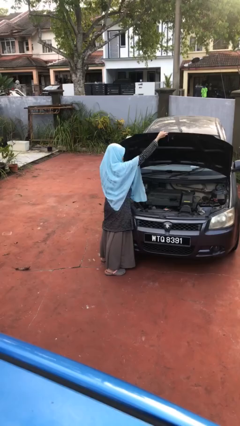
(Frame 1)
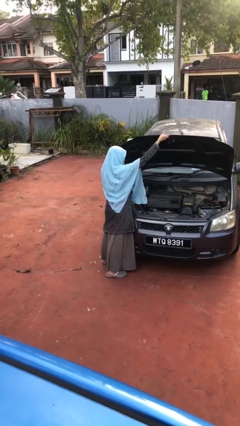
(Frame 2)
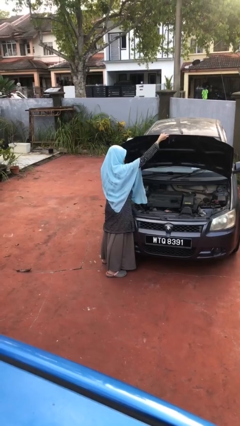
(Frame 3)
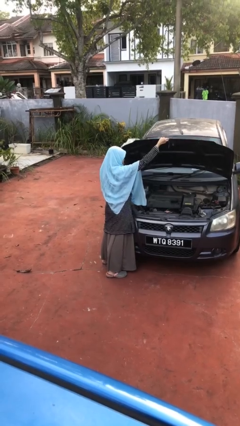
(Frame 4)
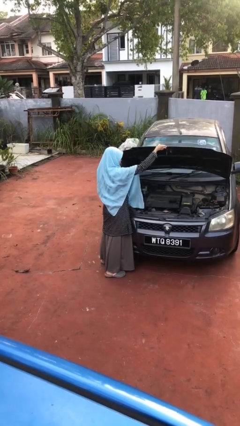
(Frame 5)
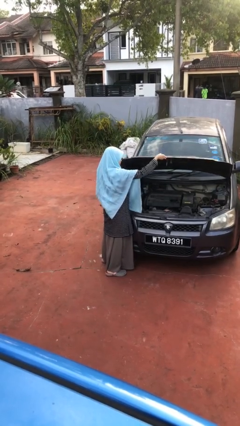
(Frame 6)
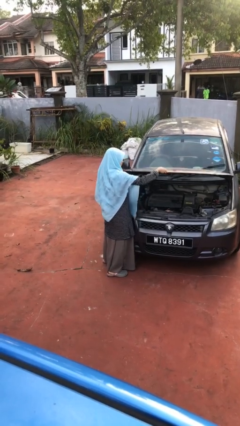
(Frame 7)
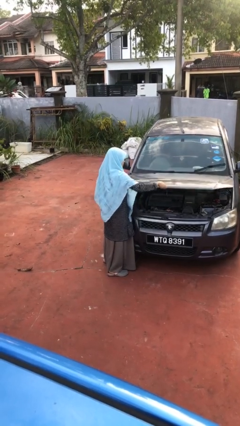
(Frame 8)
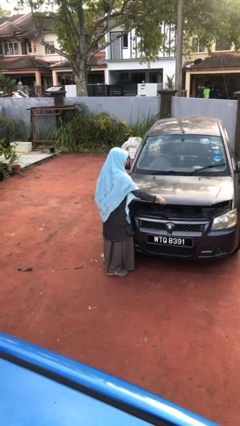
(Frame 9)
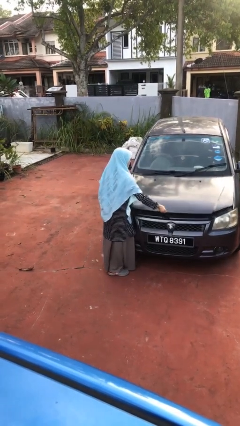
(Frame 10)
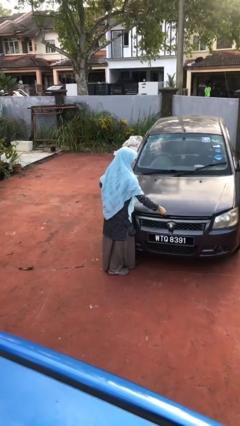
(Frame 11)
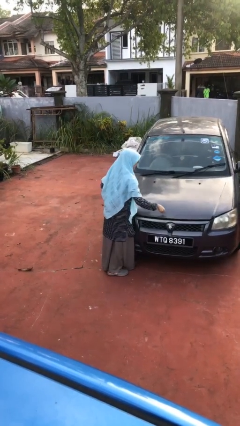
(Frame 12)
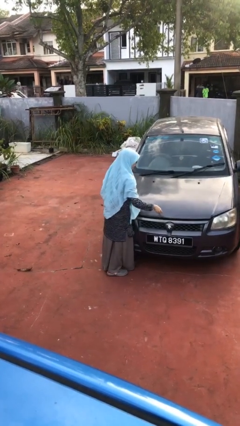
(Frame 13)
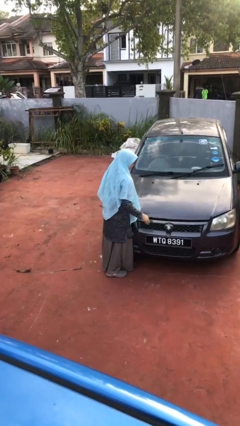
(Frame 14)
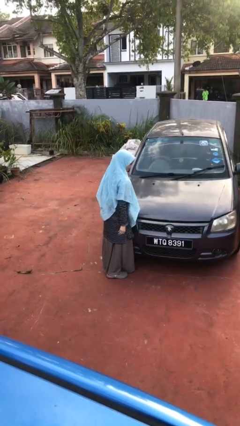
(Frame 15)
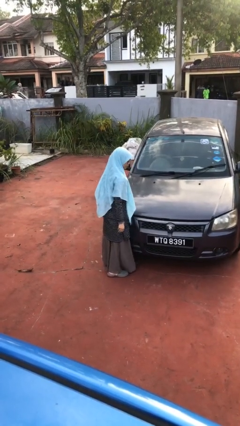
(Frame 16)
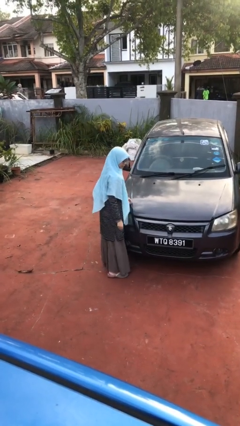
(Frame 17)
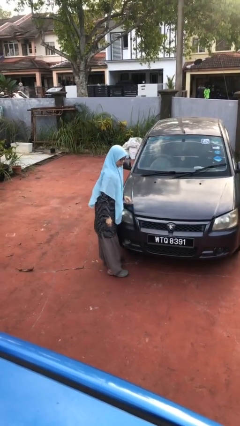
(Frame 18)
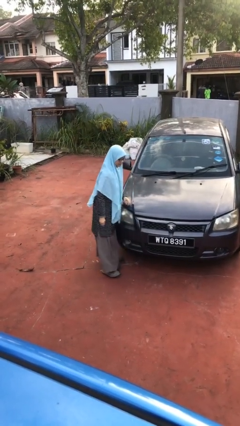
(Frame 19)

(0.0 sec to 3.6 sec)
person closes car hood

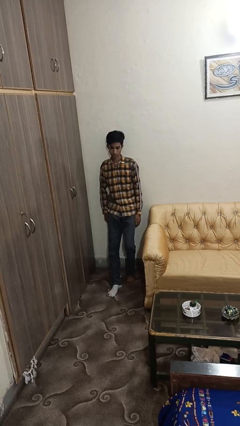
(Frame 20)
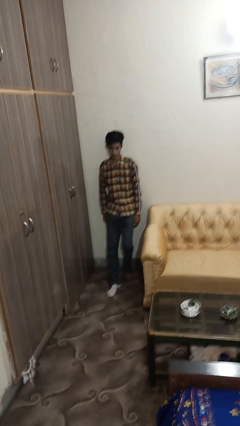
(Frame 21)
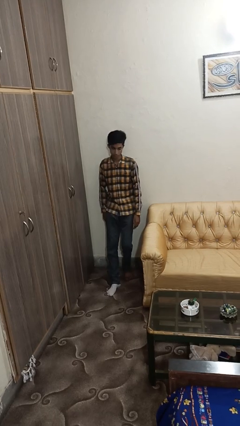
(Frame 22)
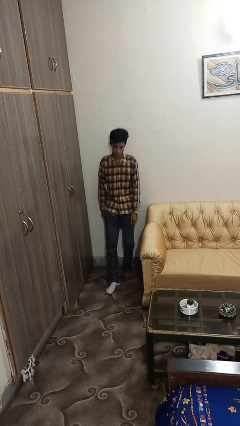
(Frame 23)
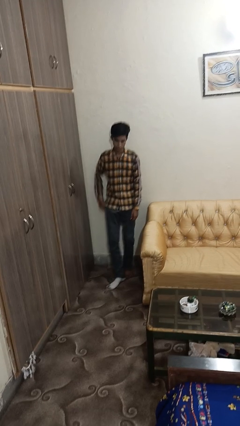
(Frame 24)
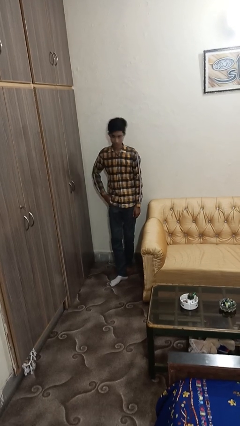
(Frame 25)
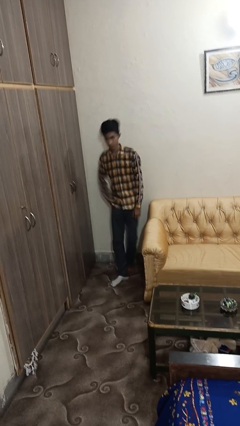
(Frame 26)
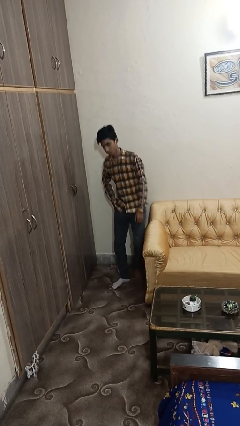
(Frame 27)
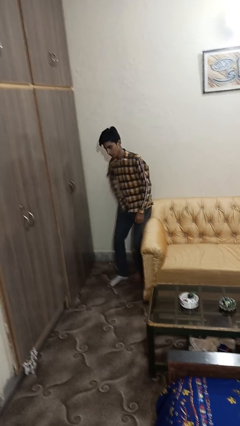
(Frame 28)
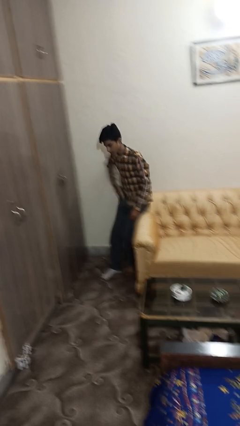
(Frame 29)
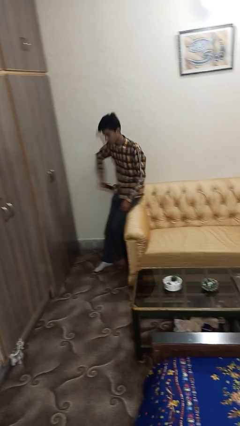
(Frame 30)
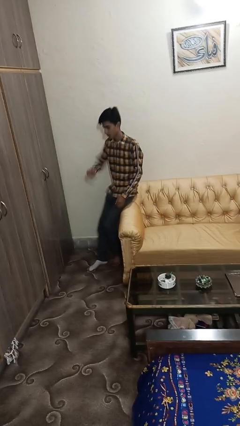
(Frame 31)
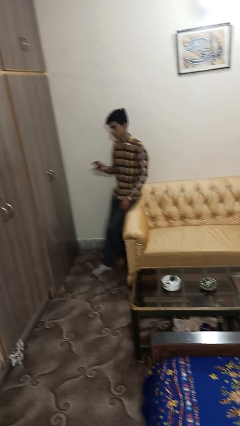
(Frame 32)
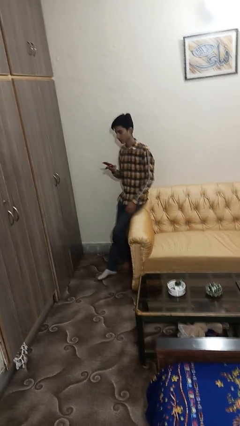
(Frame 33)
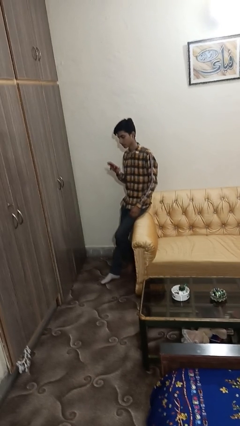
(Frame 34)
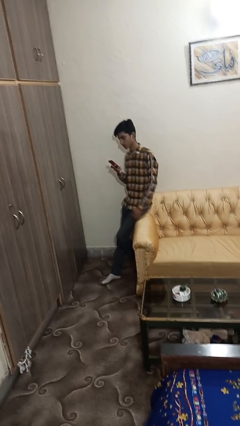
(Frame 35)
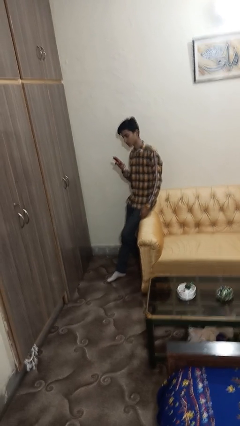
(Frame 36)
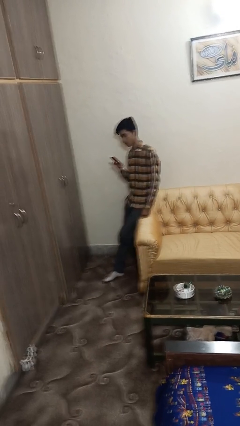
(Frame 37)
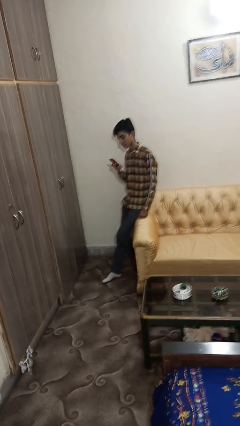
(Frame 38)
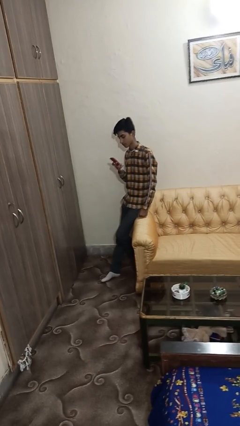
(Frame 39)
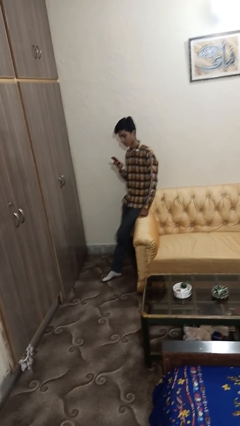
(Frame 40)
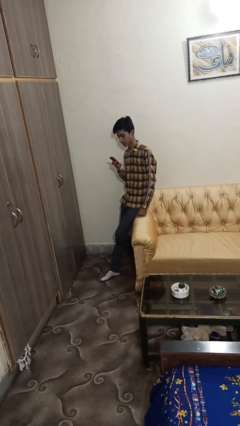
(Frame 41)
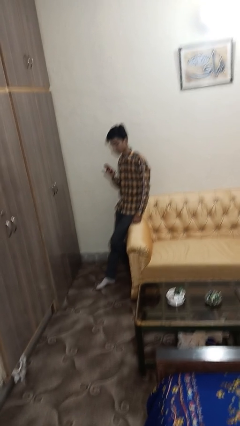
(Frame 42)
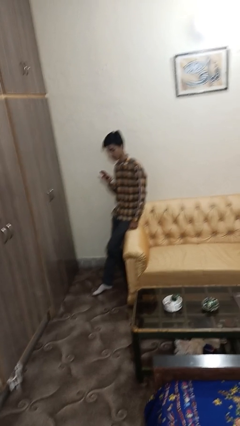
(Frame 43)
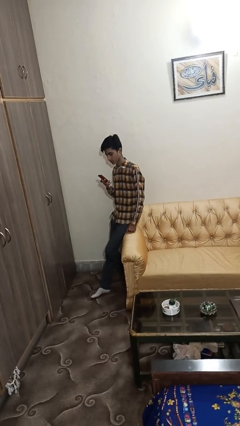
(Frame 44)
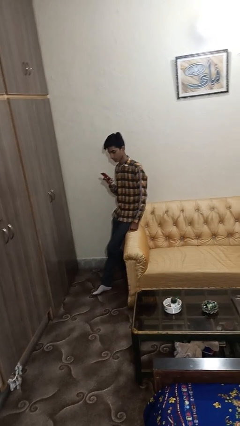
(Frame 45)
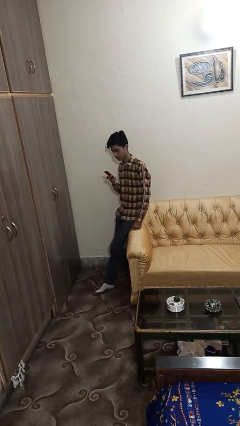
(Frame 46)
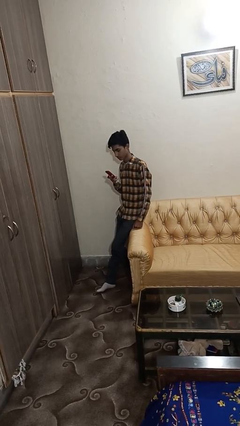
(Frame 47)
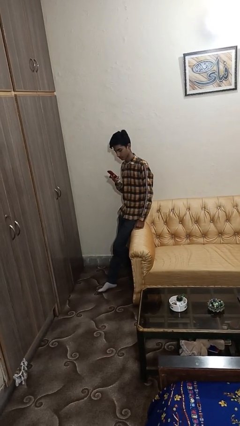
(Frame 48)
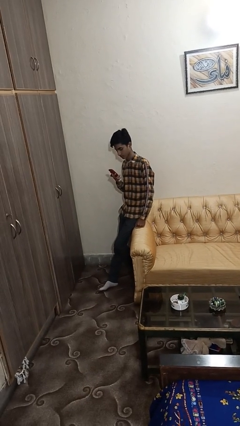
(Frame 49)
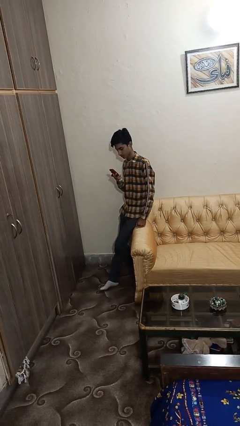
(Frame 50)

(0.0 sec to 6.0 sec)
person takes phone from pocket

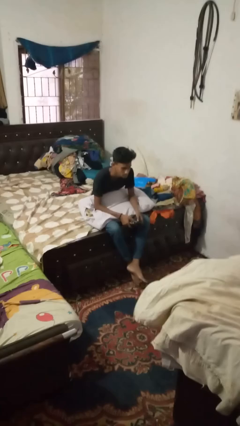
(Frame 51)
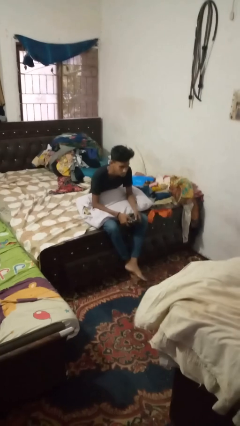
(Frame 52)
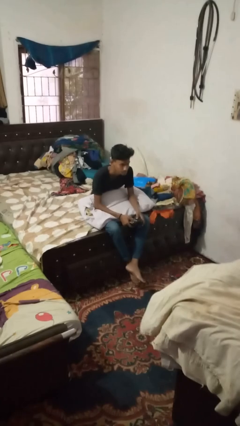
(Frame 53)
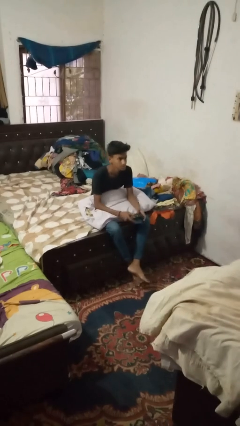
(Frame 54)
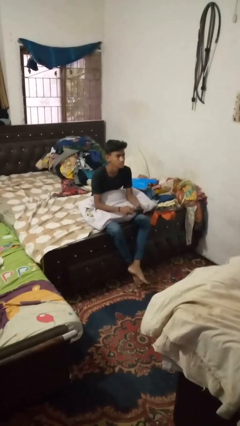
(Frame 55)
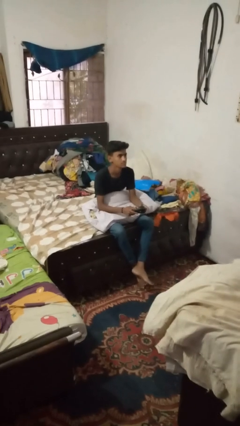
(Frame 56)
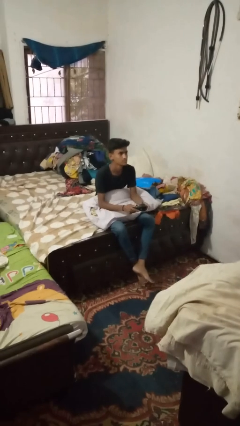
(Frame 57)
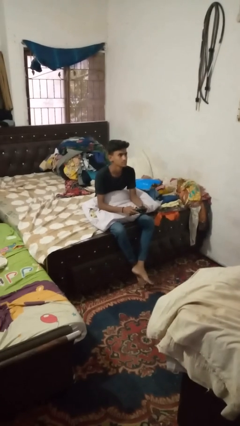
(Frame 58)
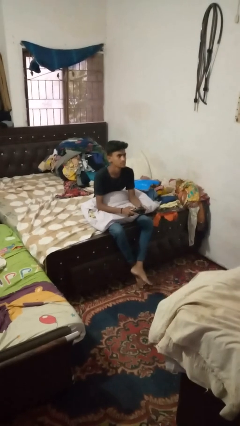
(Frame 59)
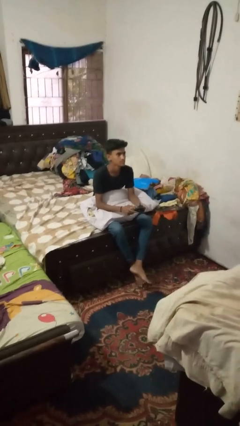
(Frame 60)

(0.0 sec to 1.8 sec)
person interacts with handheld game

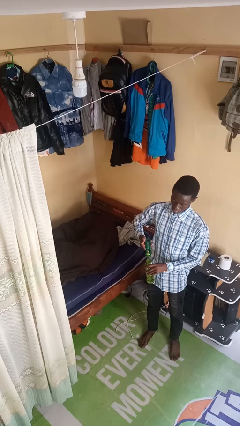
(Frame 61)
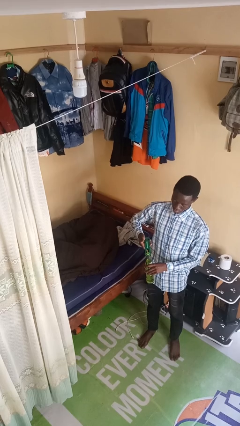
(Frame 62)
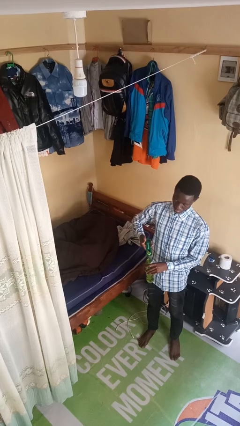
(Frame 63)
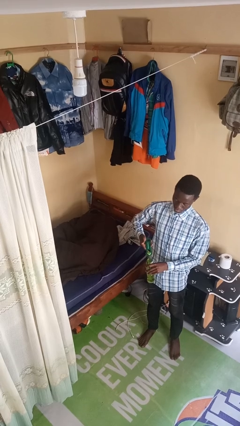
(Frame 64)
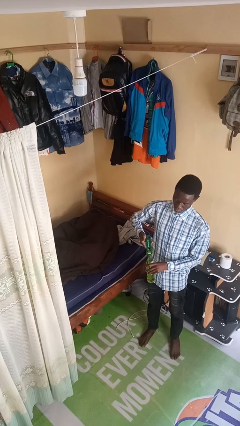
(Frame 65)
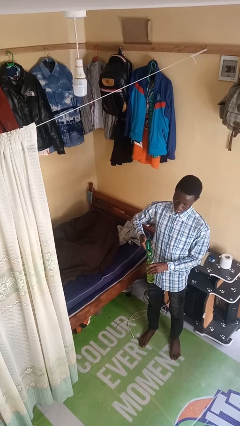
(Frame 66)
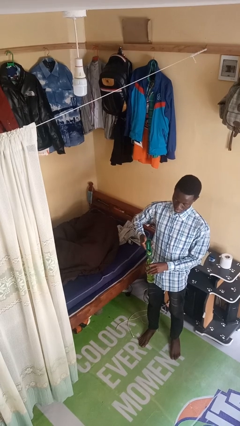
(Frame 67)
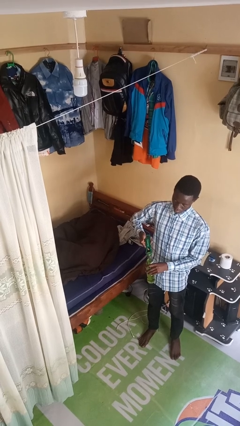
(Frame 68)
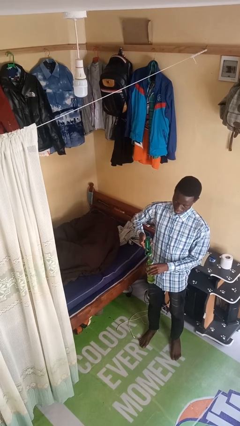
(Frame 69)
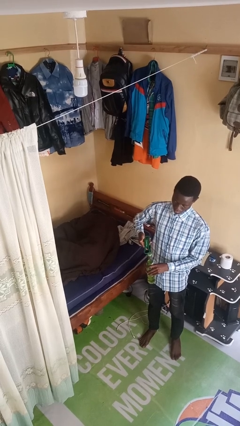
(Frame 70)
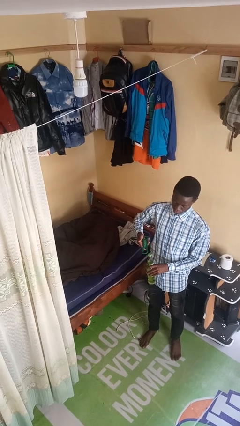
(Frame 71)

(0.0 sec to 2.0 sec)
person opens can with can opener

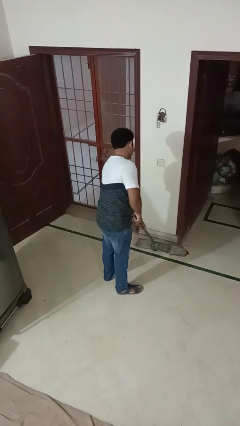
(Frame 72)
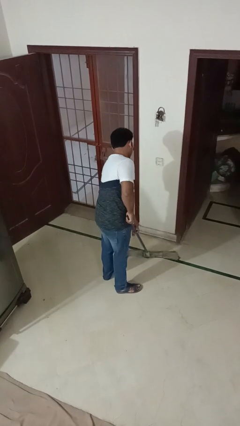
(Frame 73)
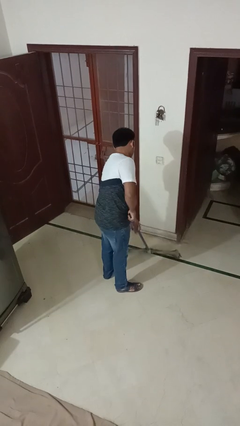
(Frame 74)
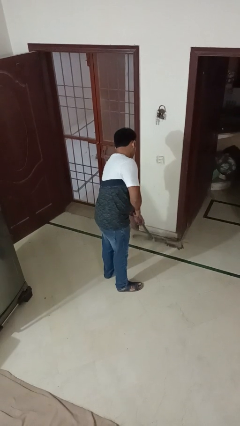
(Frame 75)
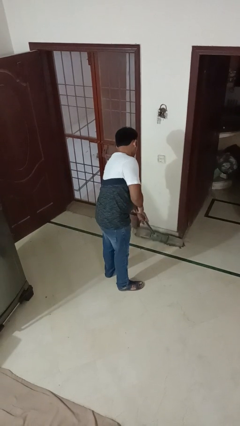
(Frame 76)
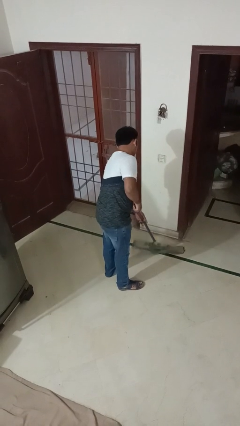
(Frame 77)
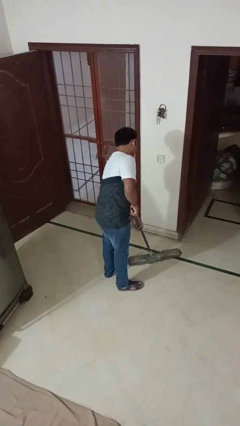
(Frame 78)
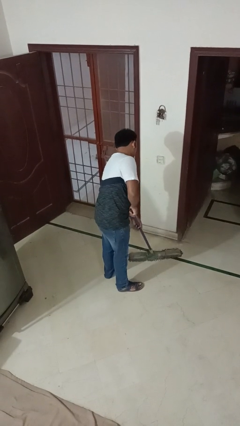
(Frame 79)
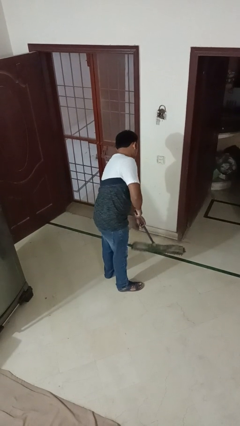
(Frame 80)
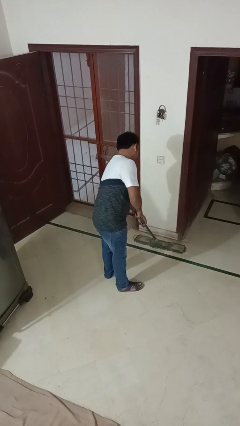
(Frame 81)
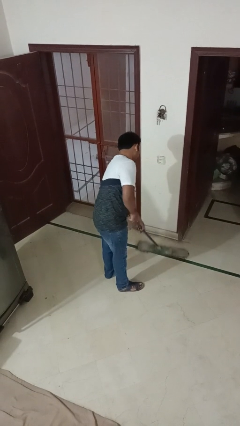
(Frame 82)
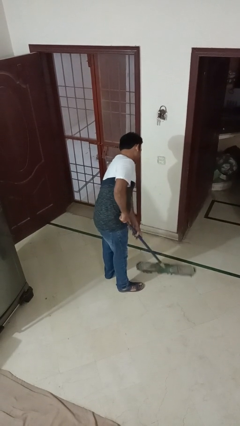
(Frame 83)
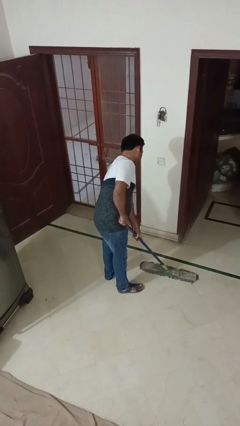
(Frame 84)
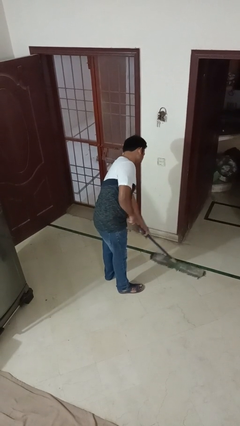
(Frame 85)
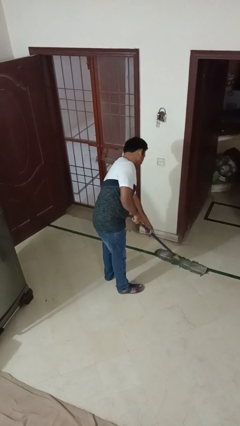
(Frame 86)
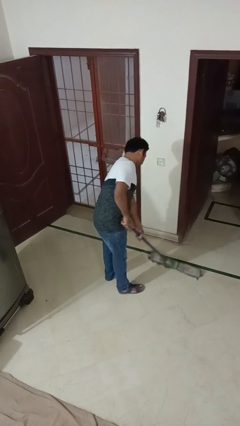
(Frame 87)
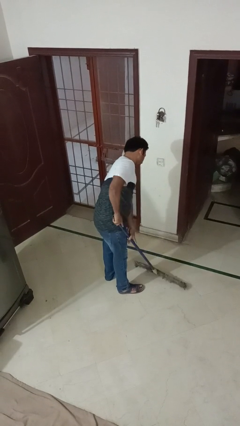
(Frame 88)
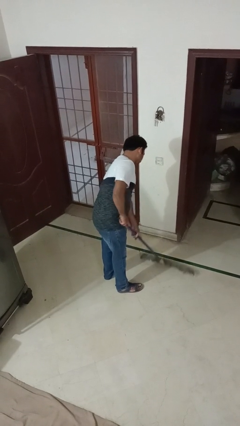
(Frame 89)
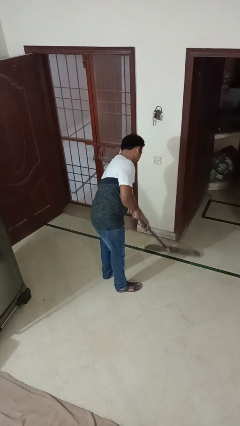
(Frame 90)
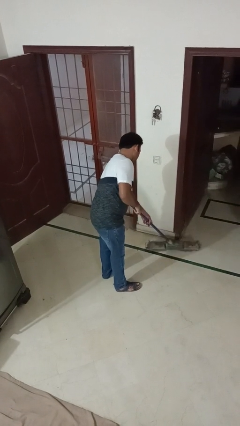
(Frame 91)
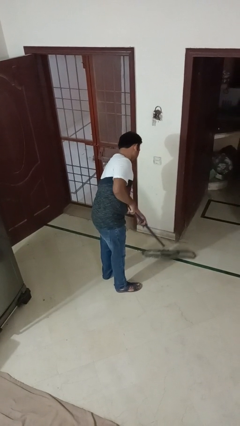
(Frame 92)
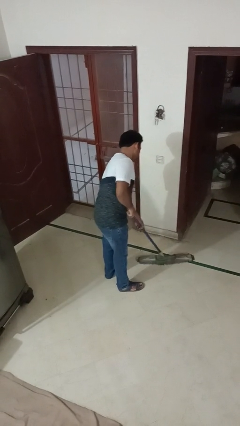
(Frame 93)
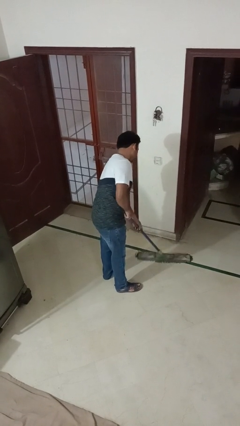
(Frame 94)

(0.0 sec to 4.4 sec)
person mops
